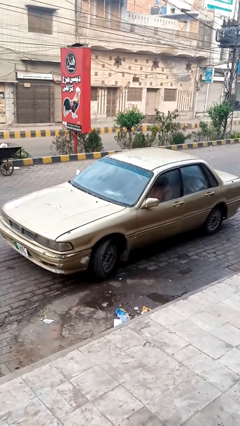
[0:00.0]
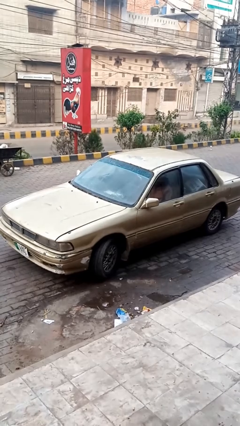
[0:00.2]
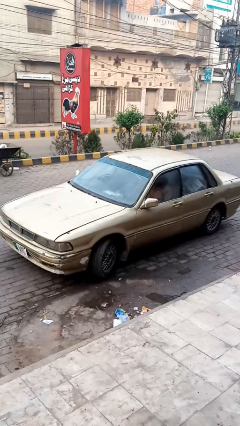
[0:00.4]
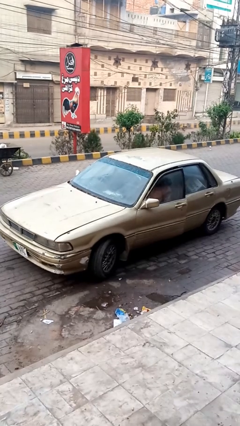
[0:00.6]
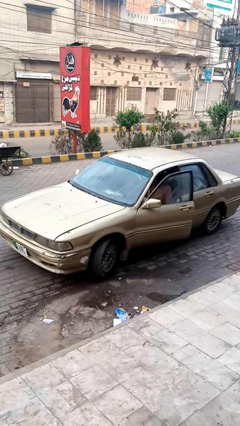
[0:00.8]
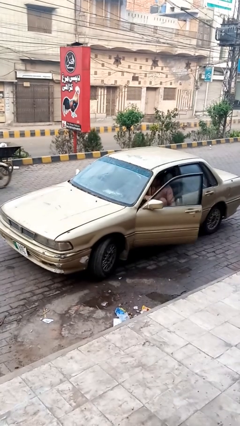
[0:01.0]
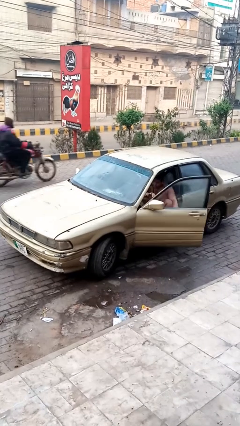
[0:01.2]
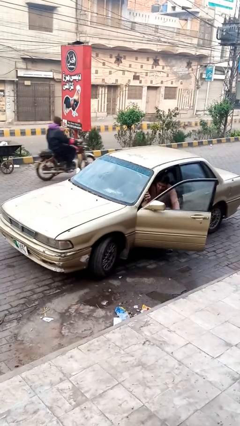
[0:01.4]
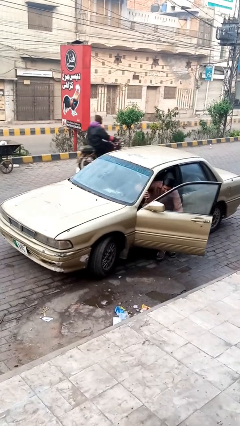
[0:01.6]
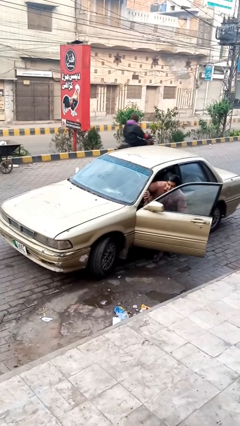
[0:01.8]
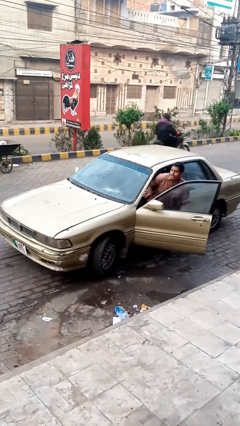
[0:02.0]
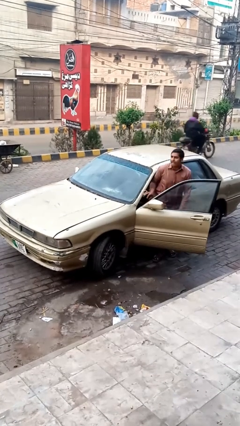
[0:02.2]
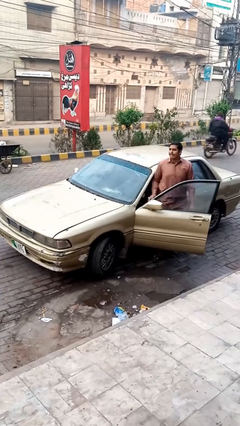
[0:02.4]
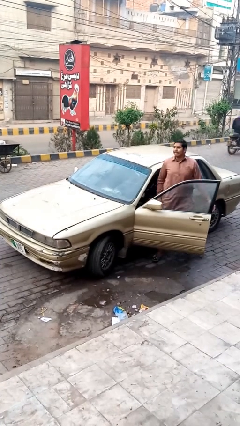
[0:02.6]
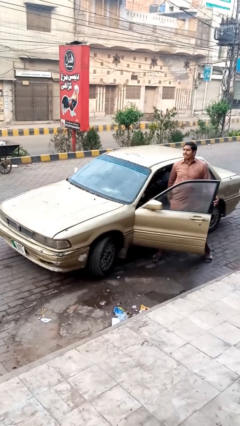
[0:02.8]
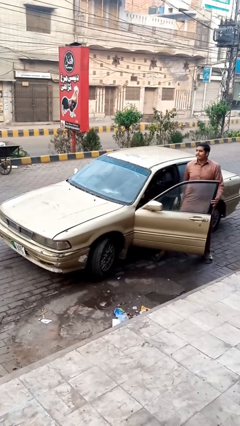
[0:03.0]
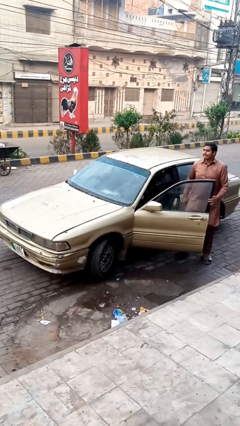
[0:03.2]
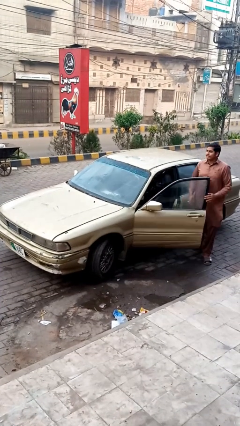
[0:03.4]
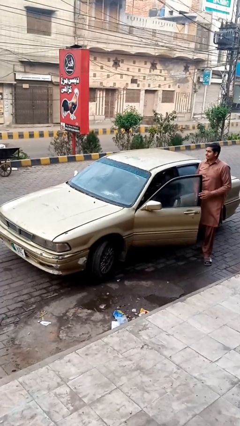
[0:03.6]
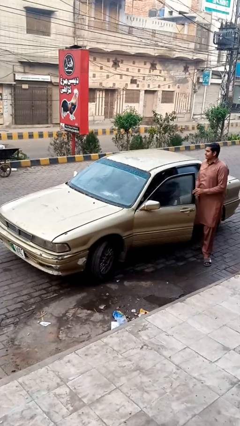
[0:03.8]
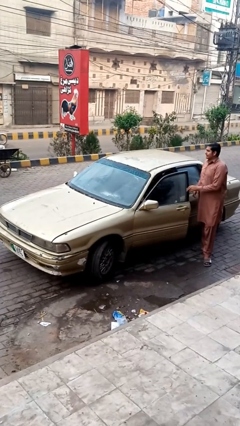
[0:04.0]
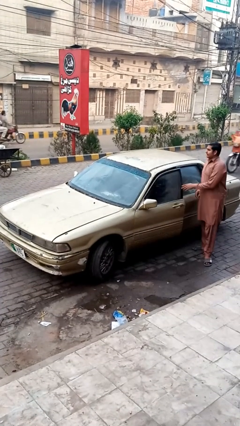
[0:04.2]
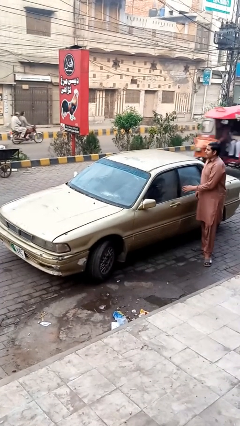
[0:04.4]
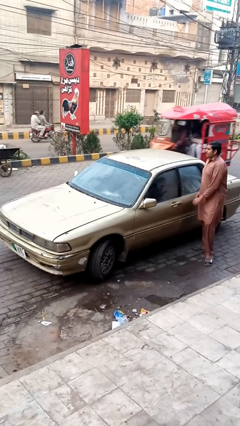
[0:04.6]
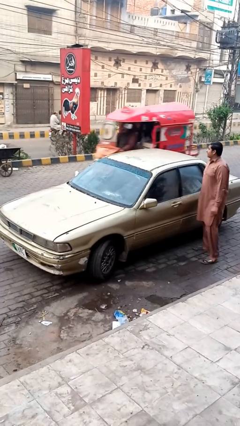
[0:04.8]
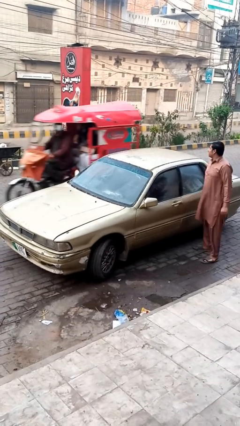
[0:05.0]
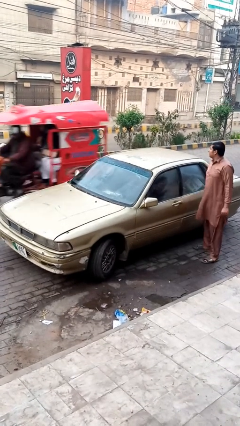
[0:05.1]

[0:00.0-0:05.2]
car drops off person

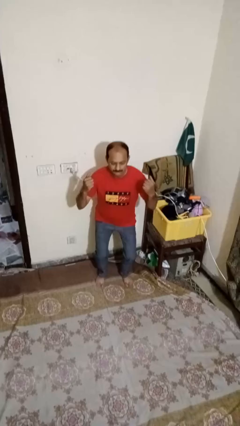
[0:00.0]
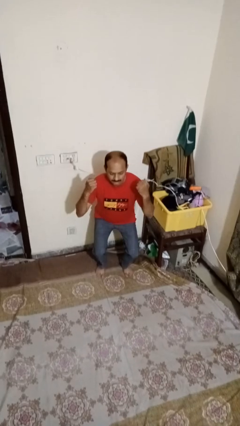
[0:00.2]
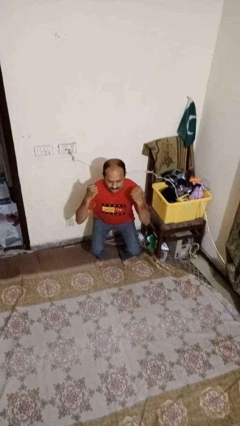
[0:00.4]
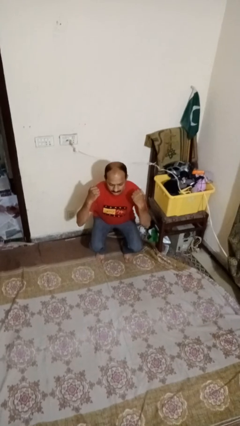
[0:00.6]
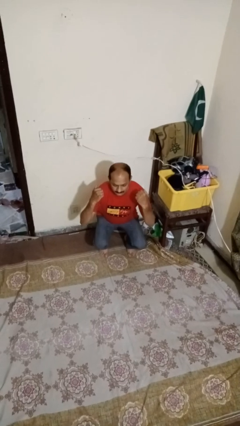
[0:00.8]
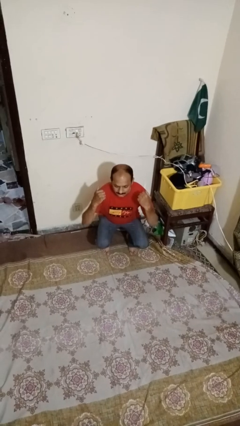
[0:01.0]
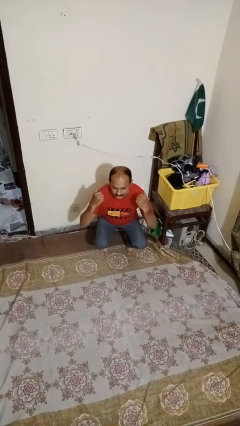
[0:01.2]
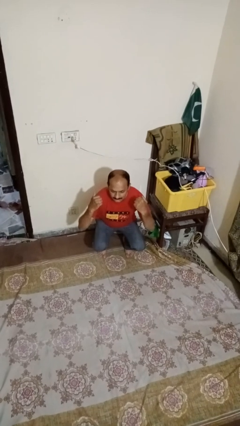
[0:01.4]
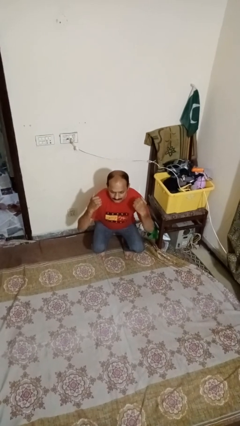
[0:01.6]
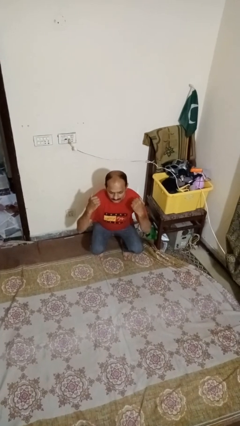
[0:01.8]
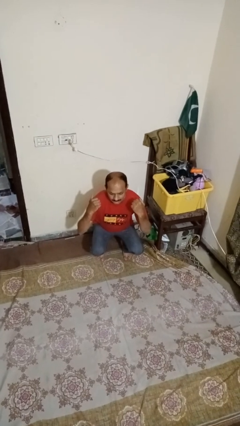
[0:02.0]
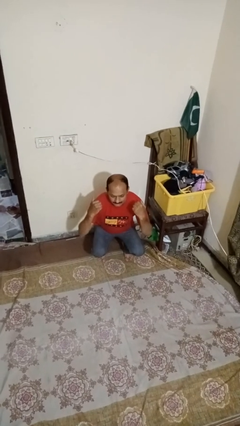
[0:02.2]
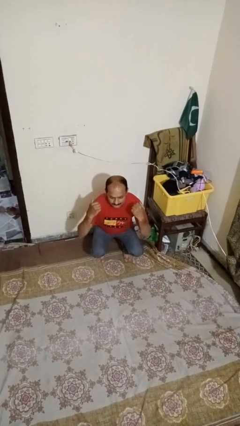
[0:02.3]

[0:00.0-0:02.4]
person squats

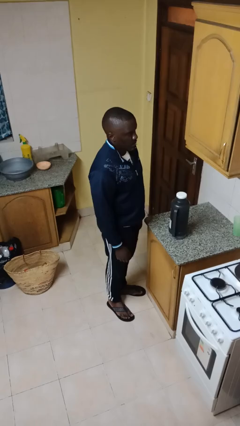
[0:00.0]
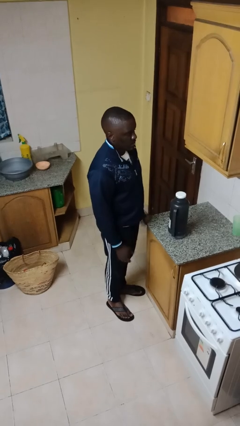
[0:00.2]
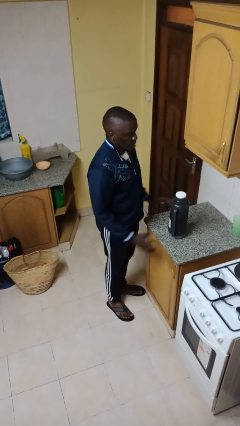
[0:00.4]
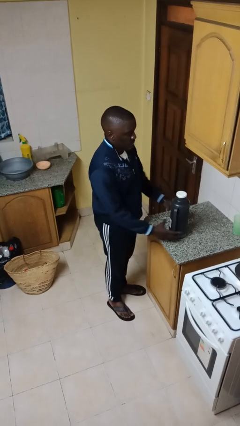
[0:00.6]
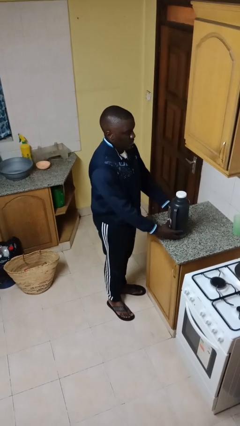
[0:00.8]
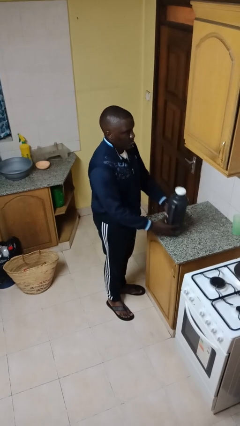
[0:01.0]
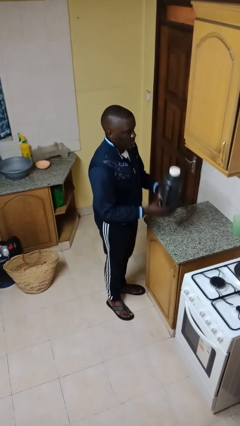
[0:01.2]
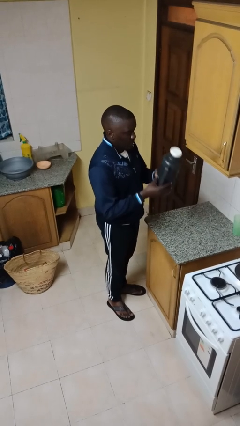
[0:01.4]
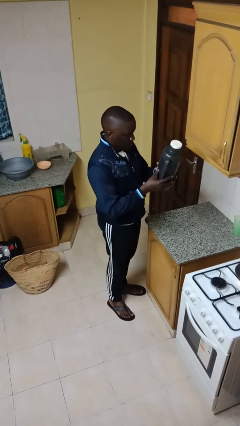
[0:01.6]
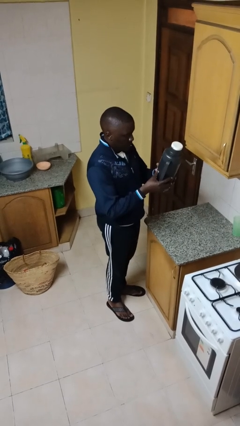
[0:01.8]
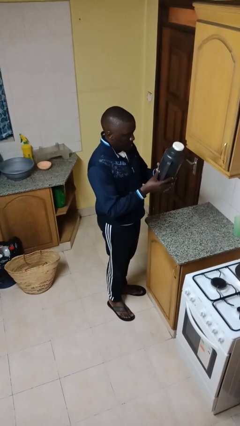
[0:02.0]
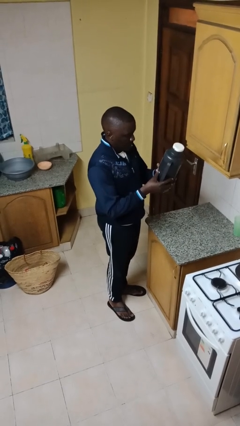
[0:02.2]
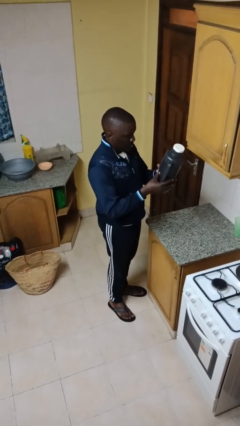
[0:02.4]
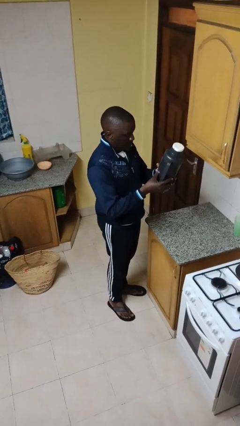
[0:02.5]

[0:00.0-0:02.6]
person picks up object from countertop

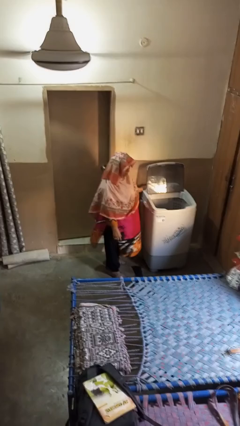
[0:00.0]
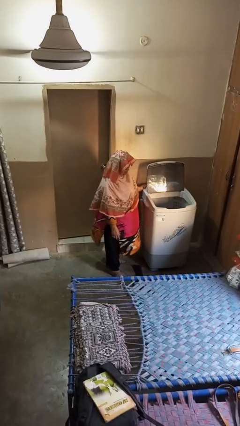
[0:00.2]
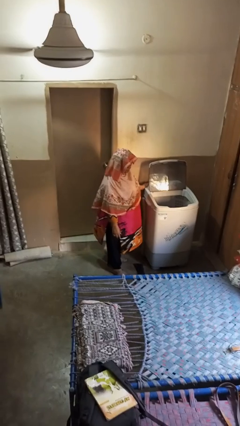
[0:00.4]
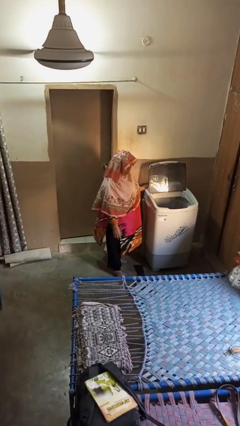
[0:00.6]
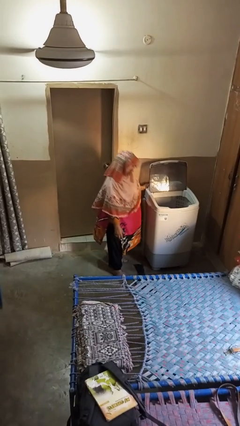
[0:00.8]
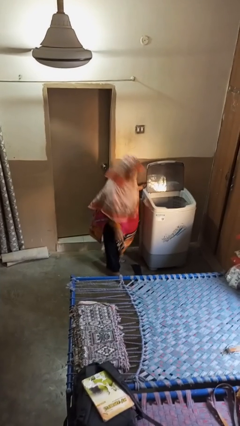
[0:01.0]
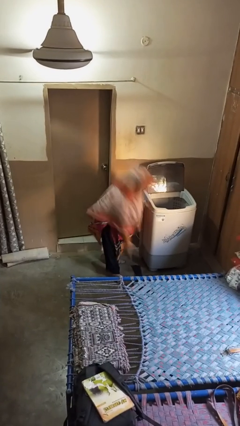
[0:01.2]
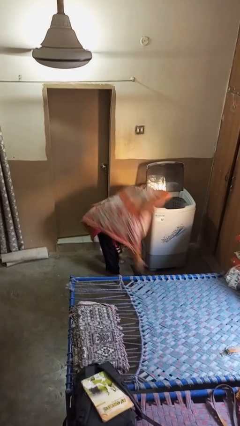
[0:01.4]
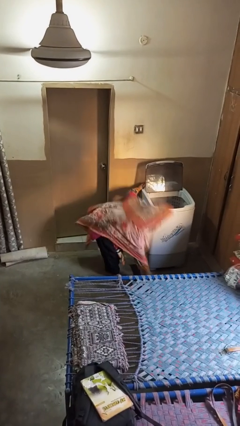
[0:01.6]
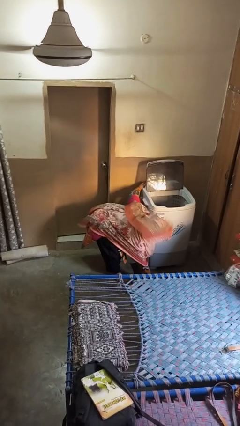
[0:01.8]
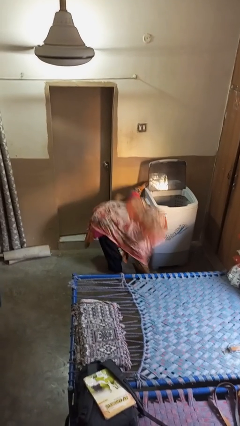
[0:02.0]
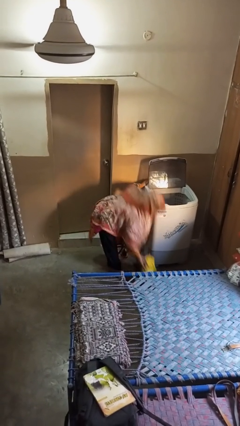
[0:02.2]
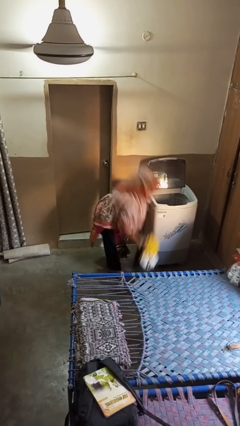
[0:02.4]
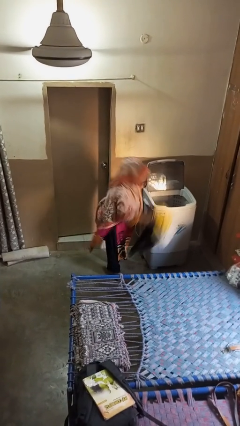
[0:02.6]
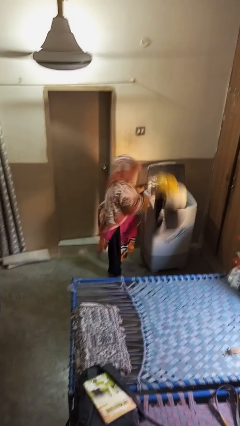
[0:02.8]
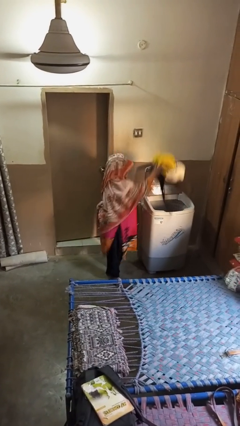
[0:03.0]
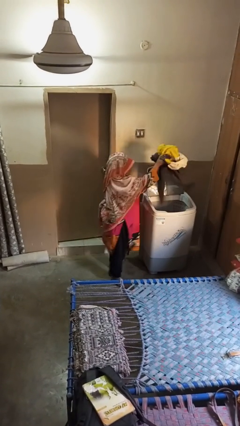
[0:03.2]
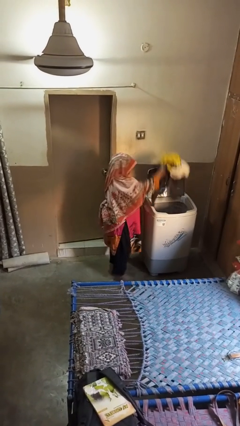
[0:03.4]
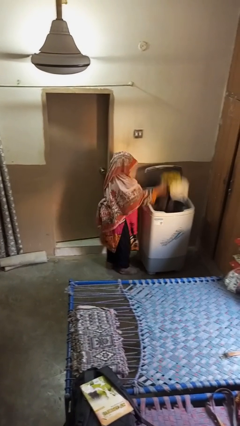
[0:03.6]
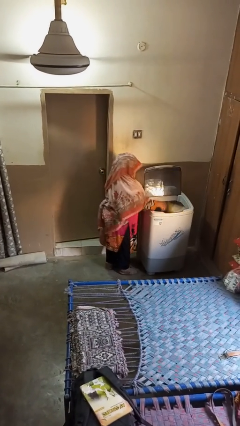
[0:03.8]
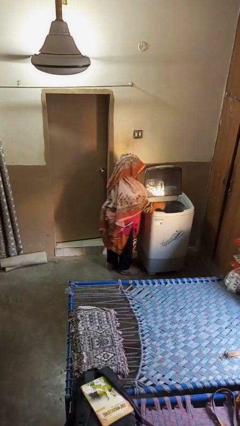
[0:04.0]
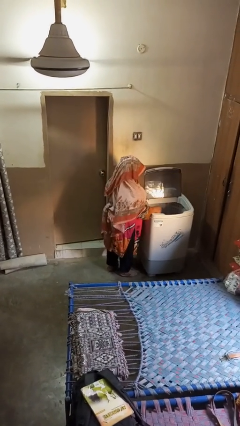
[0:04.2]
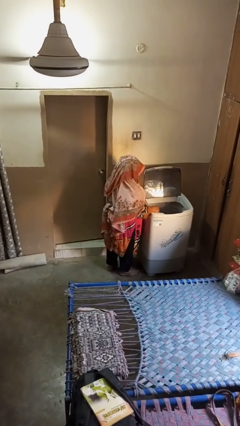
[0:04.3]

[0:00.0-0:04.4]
person loads clotheswasher

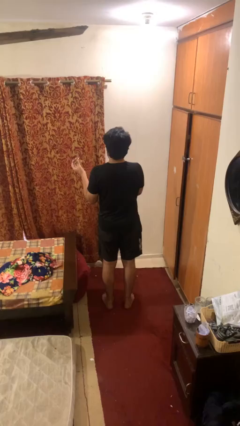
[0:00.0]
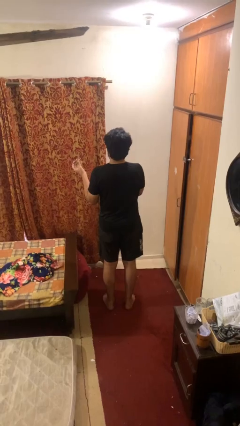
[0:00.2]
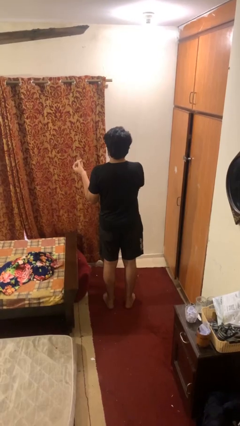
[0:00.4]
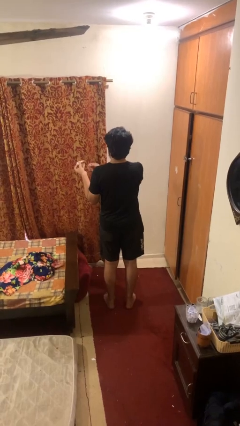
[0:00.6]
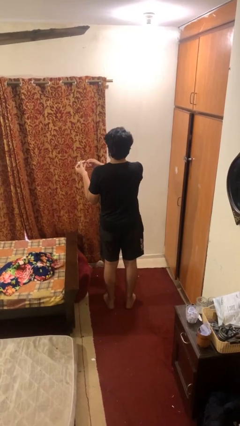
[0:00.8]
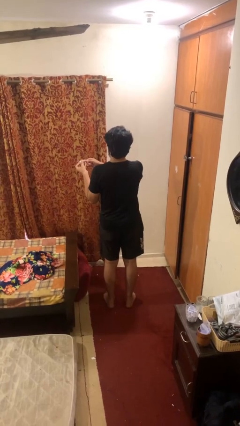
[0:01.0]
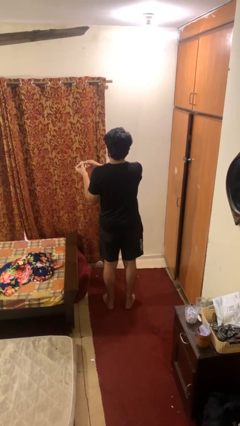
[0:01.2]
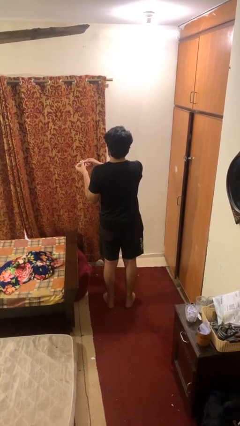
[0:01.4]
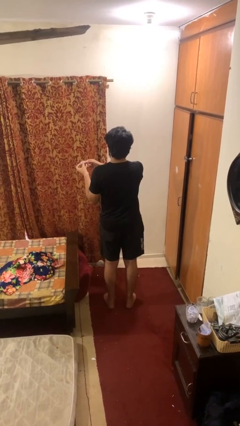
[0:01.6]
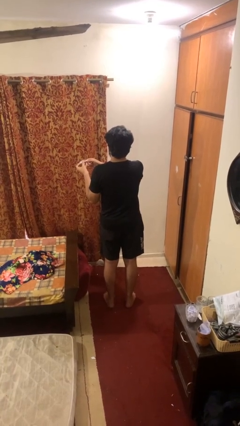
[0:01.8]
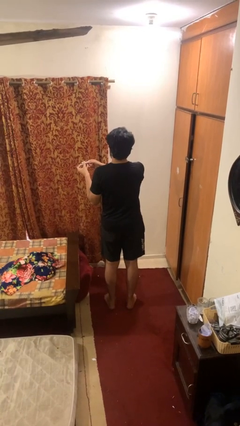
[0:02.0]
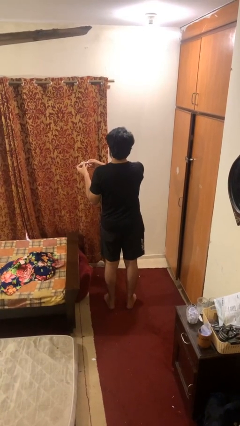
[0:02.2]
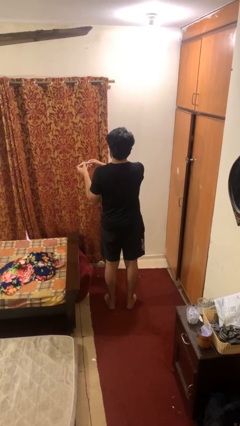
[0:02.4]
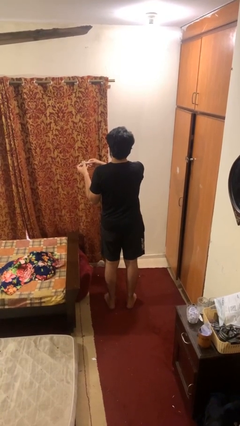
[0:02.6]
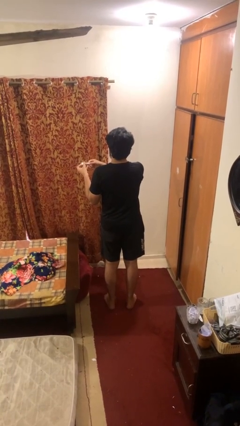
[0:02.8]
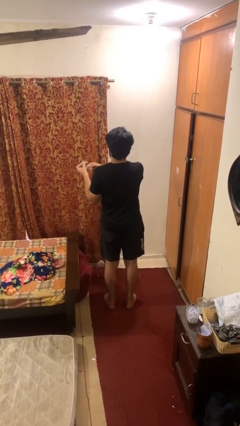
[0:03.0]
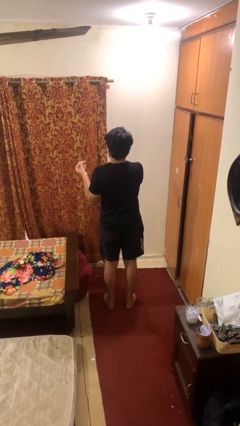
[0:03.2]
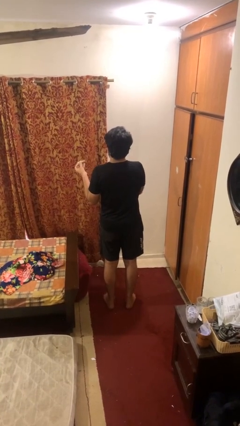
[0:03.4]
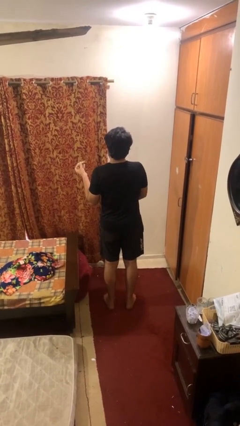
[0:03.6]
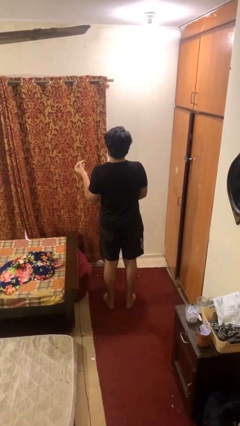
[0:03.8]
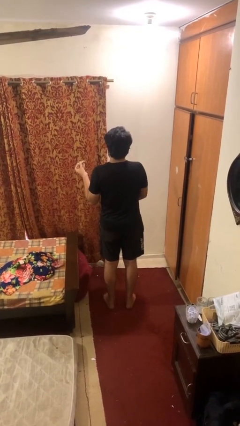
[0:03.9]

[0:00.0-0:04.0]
person clips fingernails
